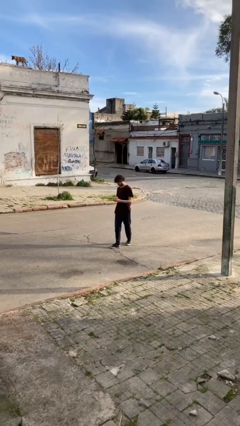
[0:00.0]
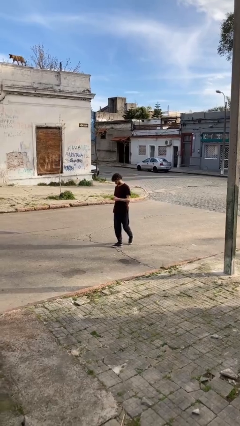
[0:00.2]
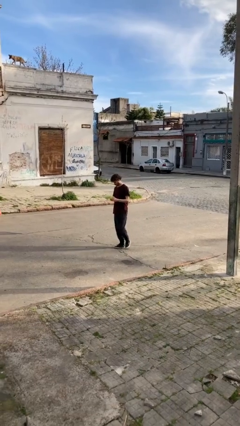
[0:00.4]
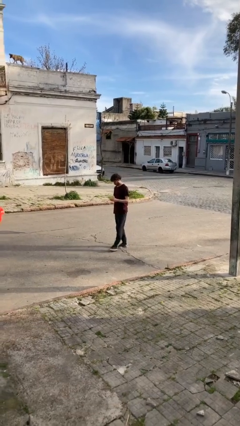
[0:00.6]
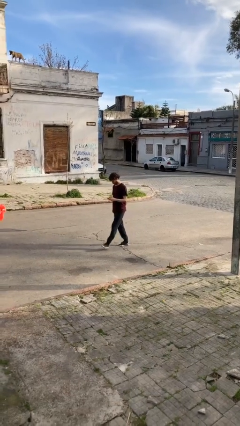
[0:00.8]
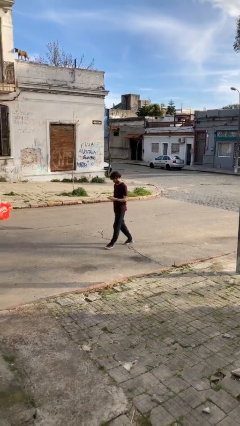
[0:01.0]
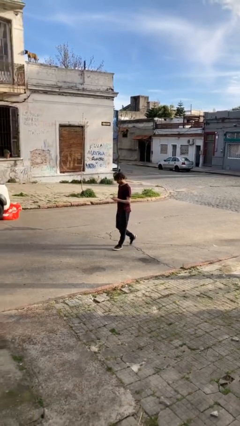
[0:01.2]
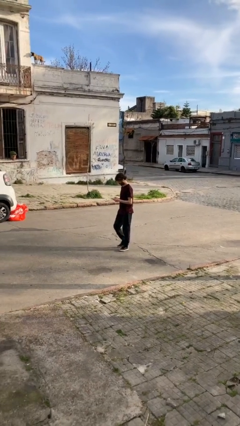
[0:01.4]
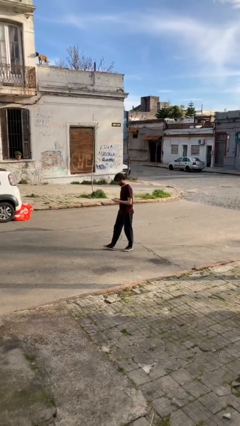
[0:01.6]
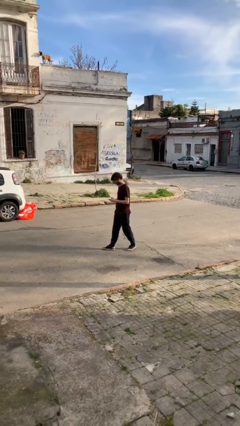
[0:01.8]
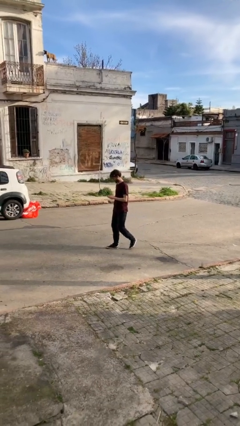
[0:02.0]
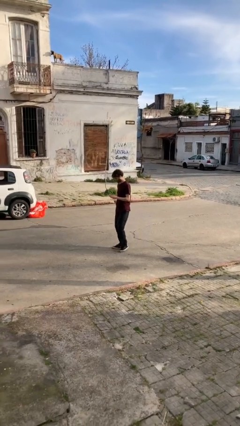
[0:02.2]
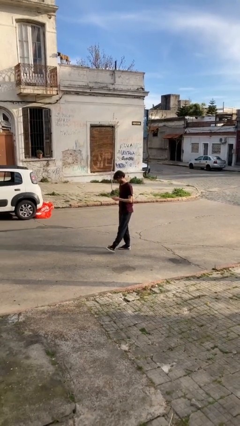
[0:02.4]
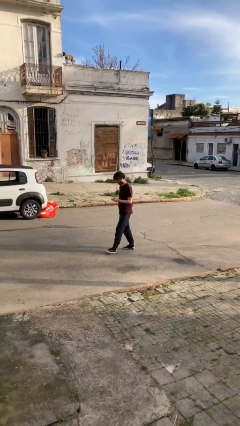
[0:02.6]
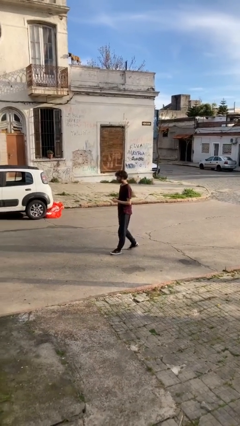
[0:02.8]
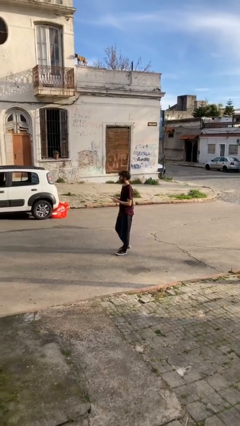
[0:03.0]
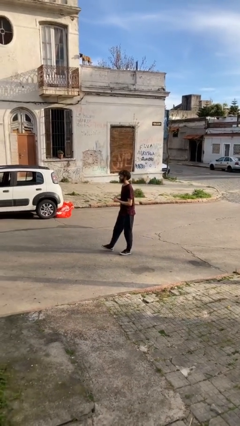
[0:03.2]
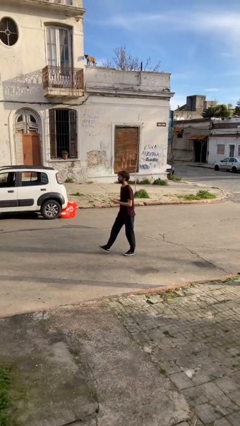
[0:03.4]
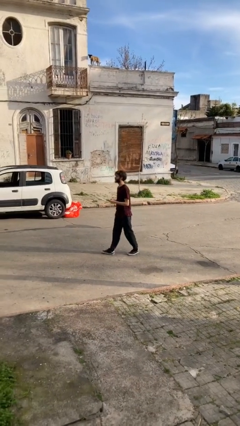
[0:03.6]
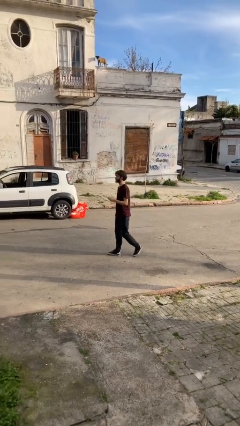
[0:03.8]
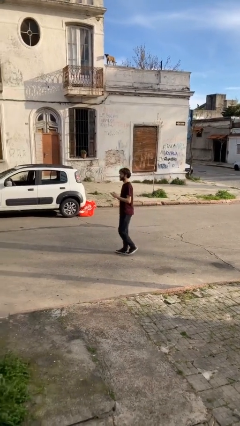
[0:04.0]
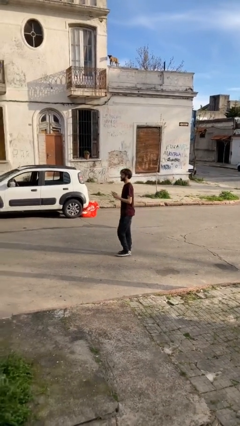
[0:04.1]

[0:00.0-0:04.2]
person texts on phone

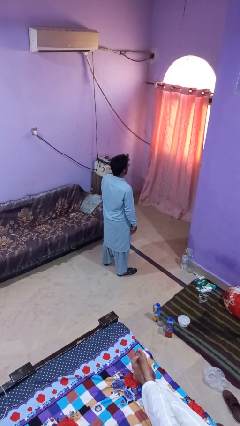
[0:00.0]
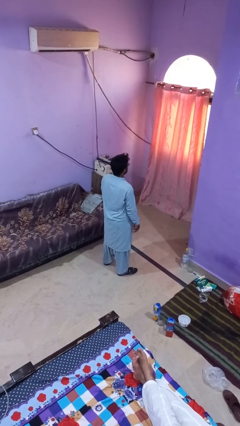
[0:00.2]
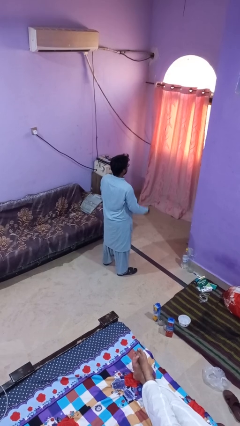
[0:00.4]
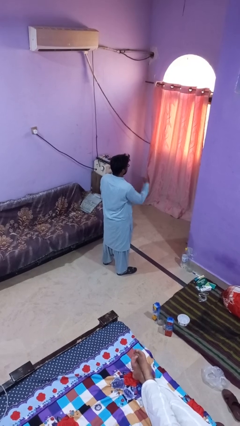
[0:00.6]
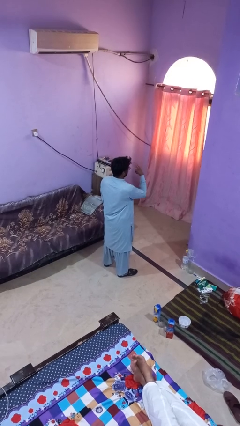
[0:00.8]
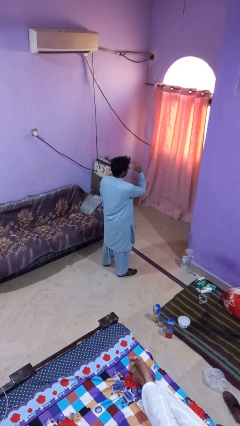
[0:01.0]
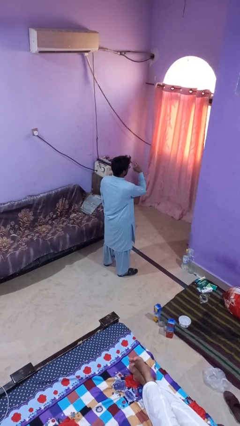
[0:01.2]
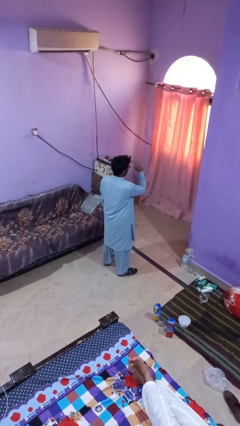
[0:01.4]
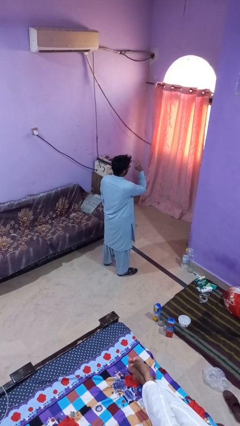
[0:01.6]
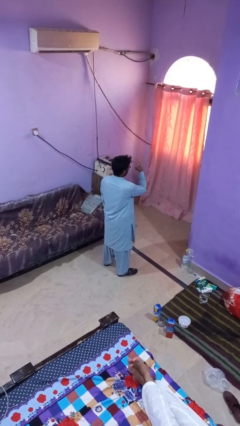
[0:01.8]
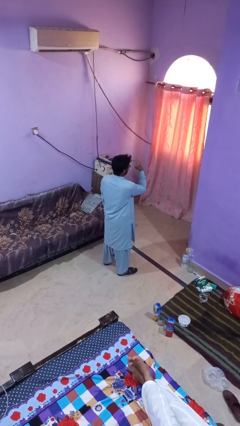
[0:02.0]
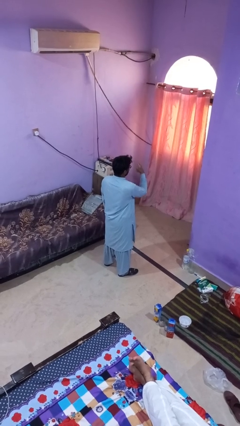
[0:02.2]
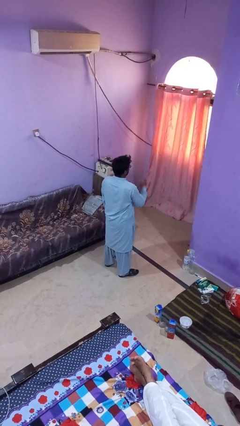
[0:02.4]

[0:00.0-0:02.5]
person gestures peace

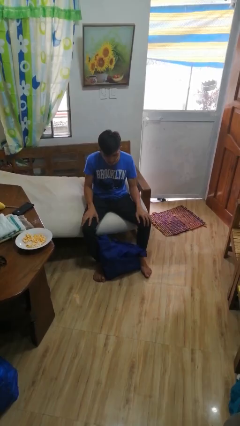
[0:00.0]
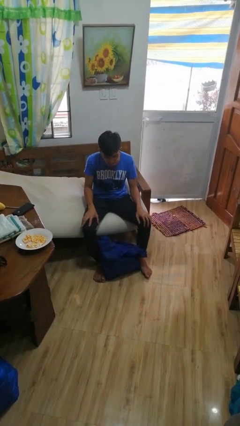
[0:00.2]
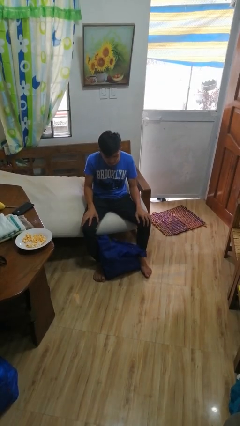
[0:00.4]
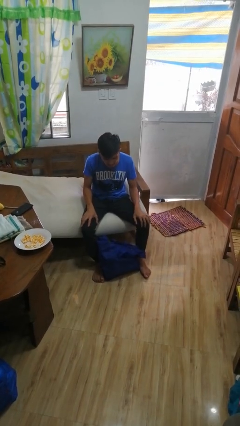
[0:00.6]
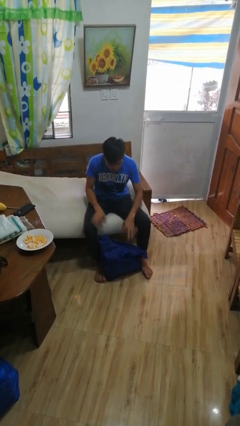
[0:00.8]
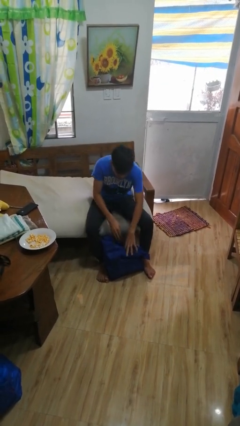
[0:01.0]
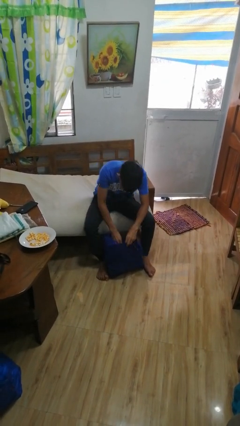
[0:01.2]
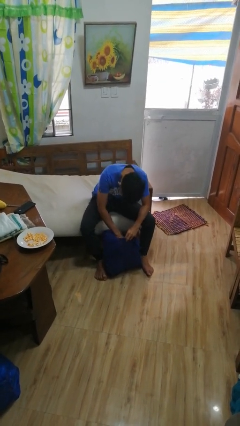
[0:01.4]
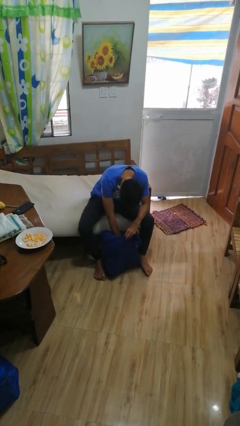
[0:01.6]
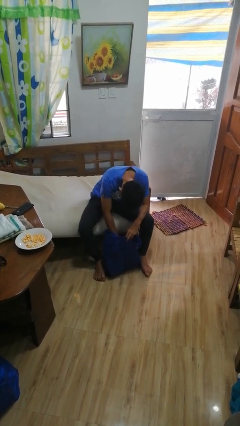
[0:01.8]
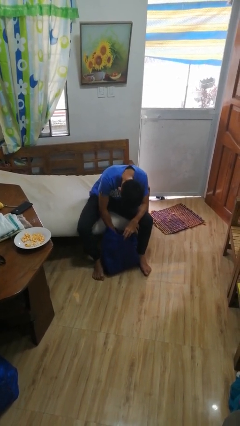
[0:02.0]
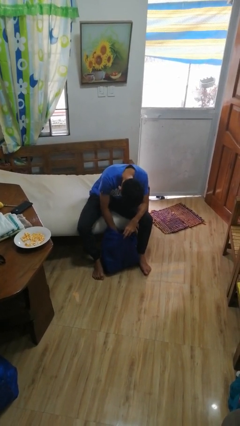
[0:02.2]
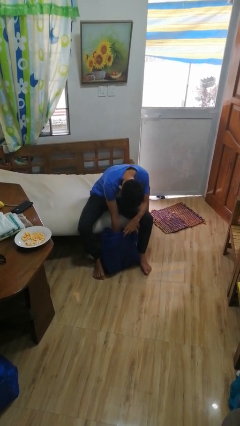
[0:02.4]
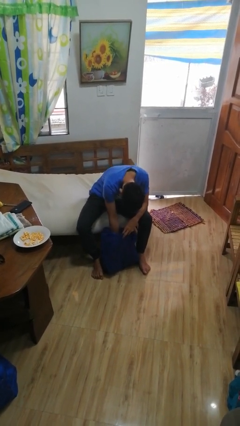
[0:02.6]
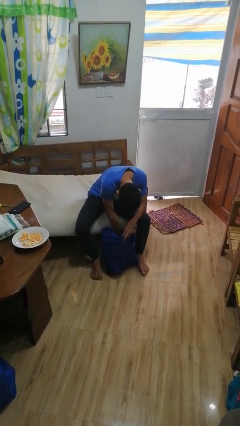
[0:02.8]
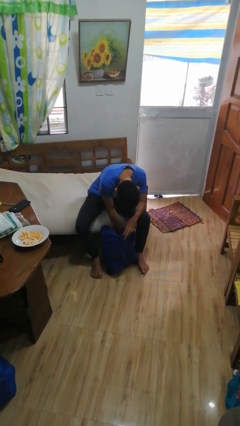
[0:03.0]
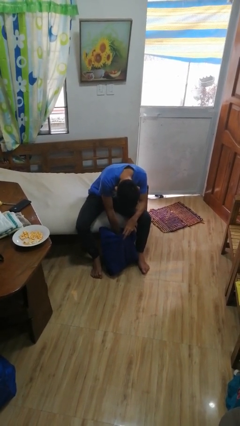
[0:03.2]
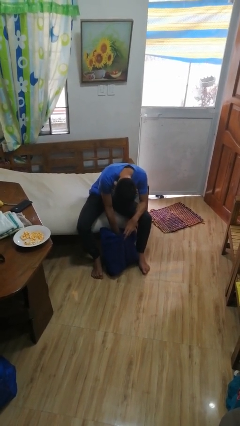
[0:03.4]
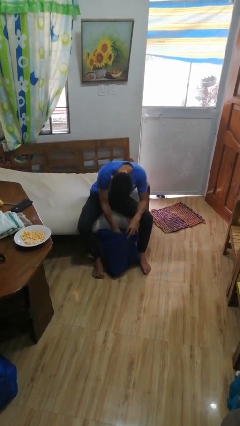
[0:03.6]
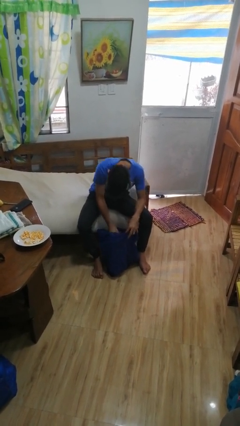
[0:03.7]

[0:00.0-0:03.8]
person searches in bag

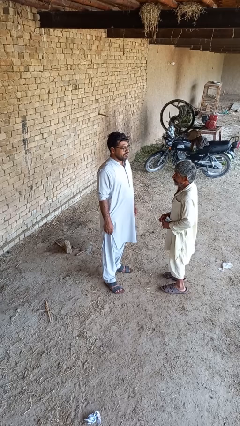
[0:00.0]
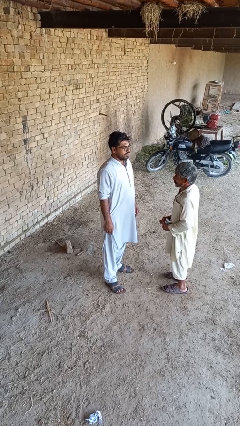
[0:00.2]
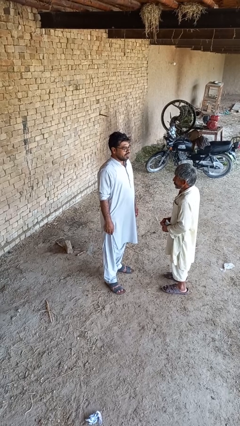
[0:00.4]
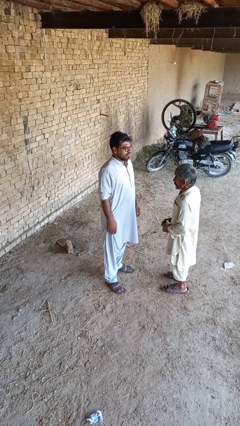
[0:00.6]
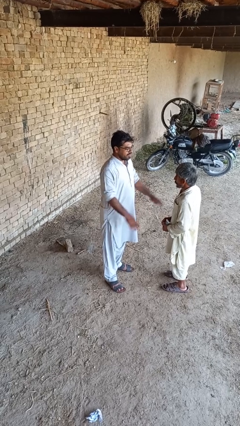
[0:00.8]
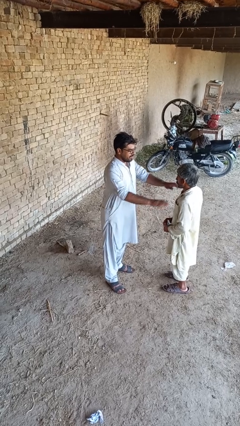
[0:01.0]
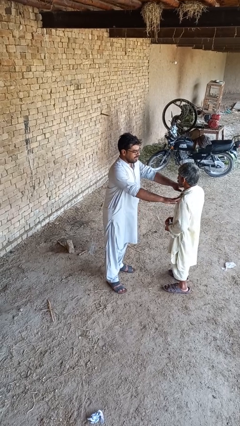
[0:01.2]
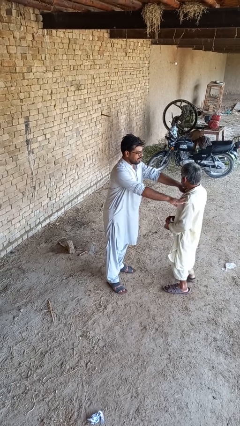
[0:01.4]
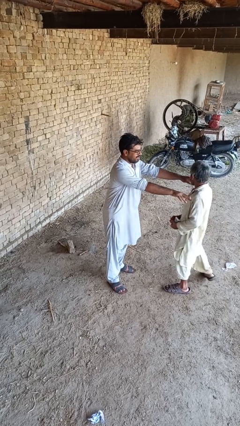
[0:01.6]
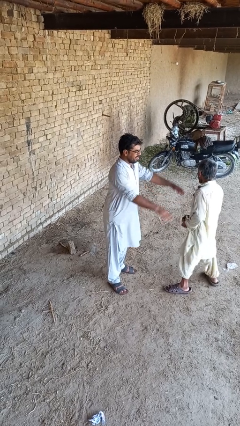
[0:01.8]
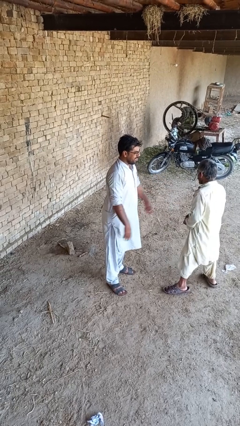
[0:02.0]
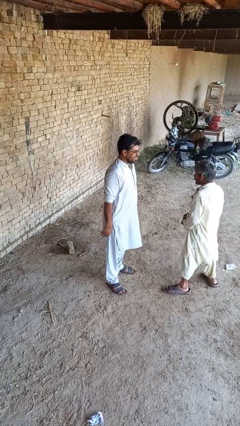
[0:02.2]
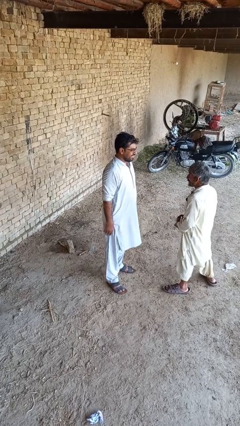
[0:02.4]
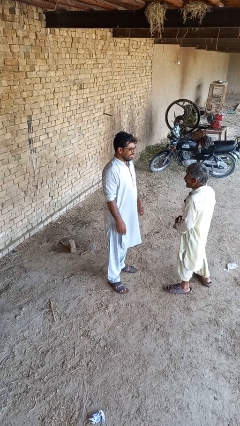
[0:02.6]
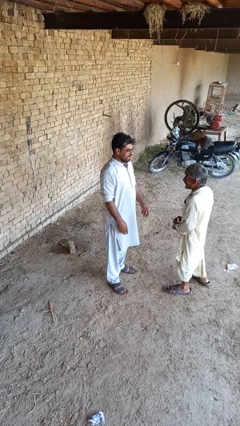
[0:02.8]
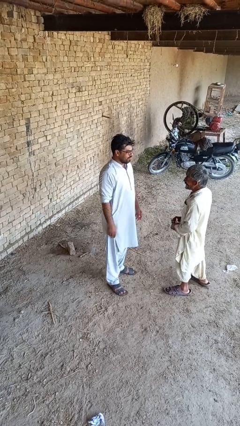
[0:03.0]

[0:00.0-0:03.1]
person shoves person

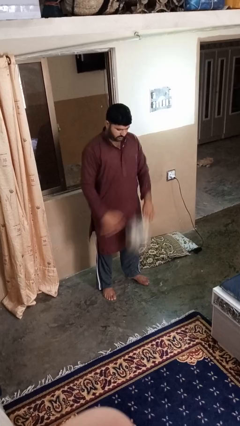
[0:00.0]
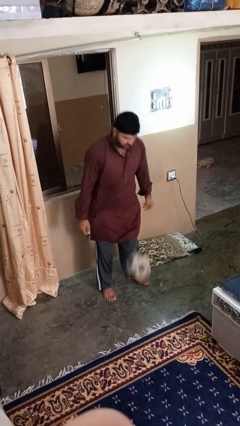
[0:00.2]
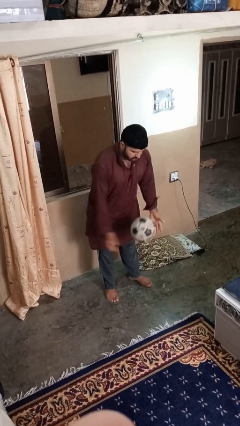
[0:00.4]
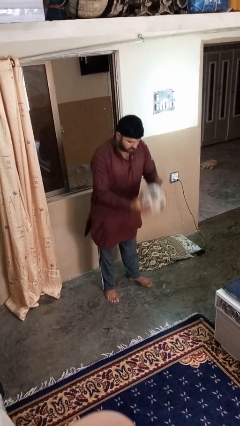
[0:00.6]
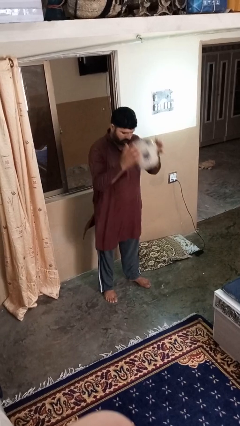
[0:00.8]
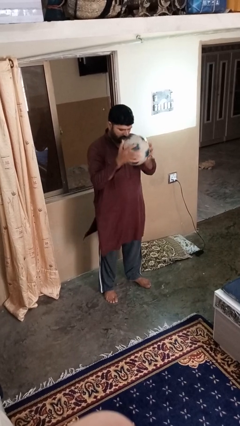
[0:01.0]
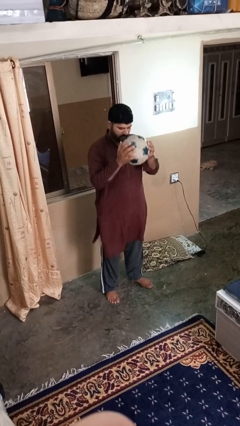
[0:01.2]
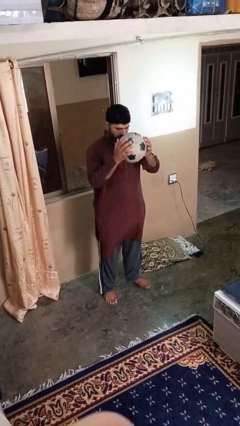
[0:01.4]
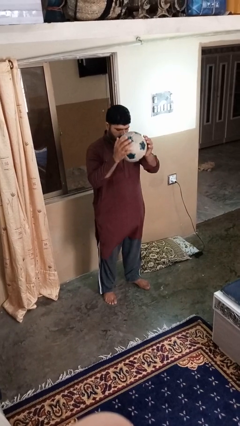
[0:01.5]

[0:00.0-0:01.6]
person bounces ball on floor

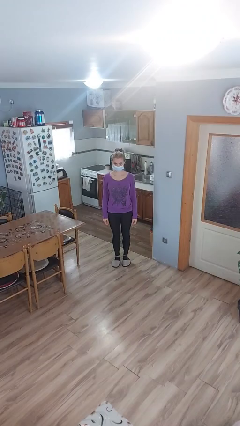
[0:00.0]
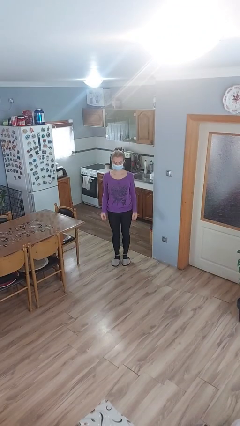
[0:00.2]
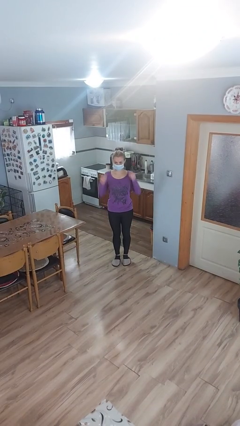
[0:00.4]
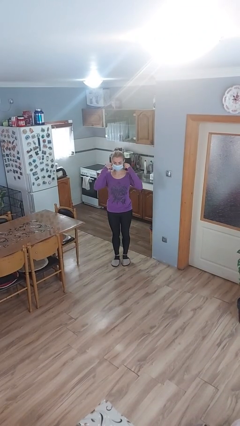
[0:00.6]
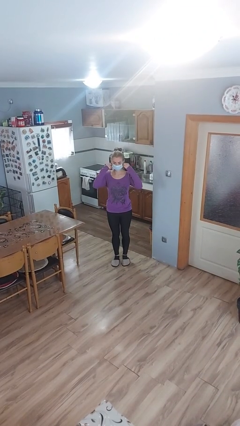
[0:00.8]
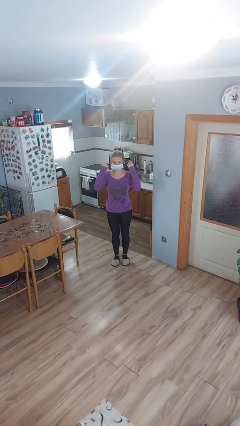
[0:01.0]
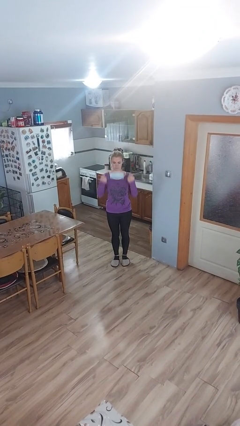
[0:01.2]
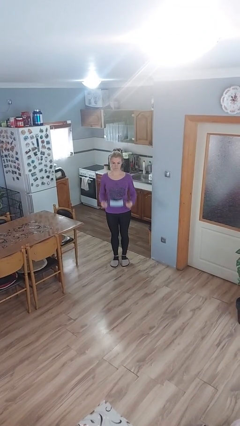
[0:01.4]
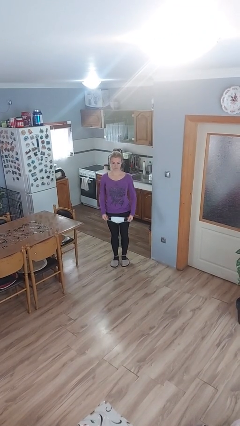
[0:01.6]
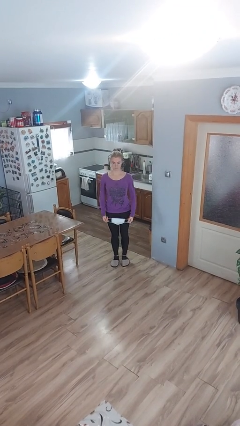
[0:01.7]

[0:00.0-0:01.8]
person takes off facemask

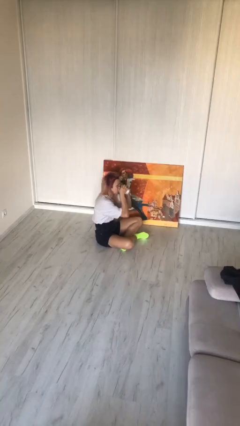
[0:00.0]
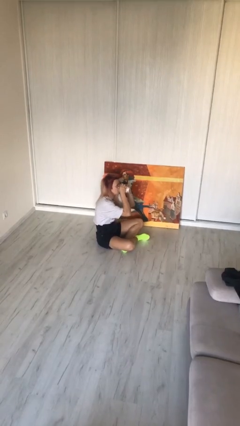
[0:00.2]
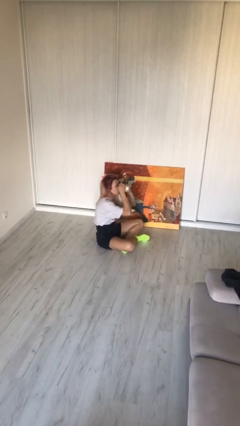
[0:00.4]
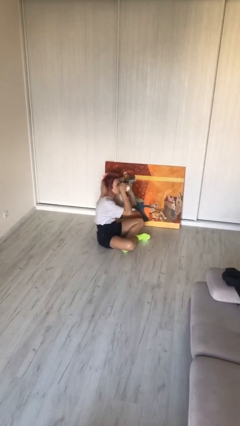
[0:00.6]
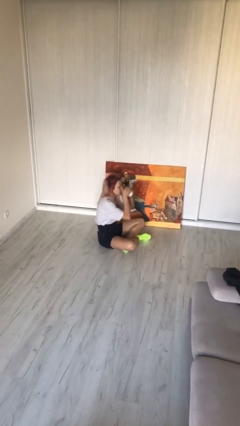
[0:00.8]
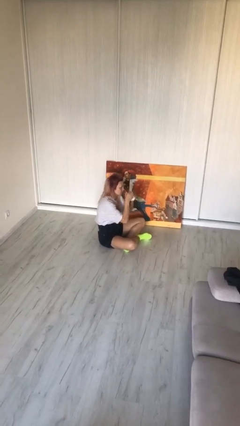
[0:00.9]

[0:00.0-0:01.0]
person drinks from mug
